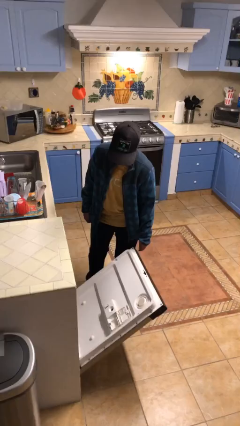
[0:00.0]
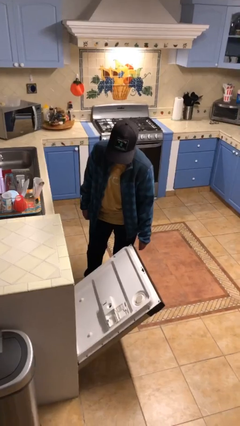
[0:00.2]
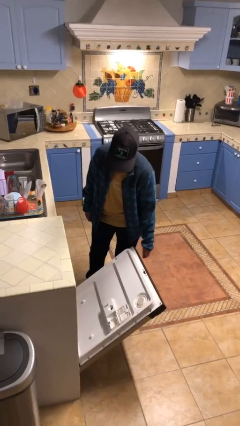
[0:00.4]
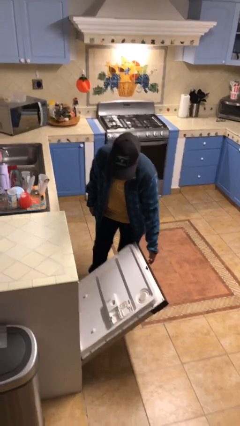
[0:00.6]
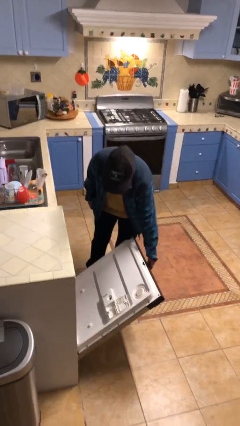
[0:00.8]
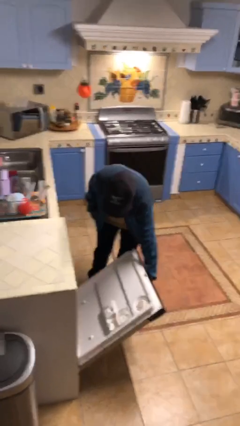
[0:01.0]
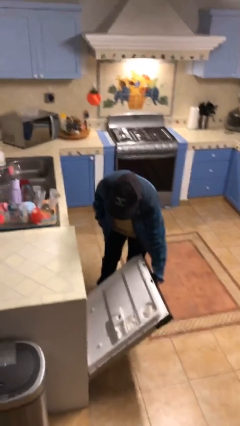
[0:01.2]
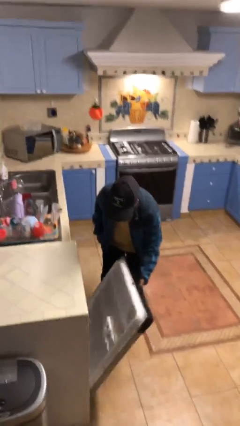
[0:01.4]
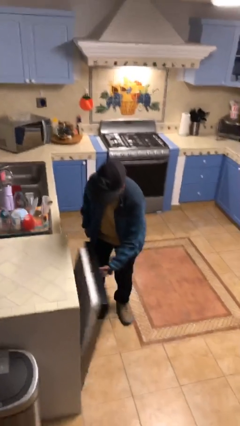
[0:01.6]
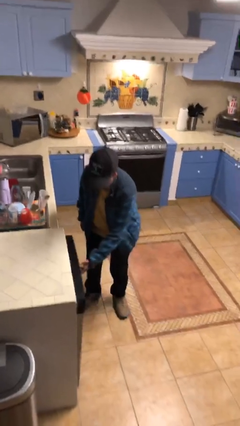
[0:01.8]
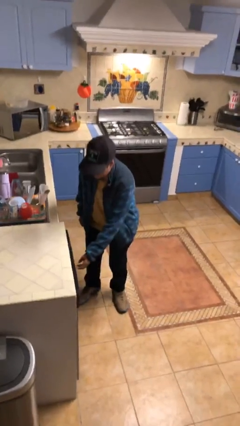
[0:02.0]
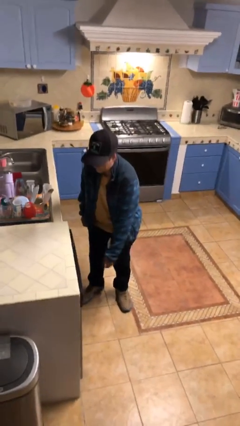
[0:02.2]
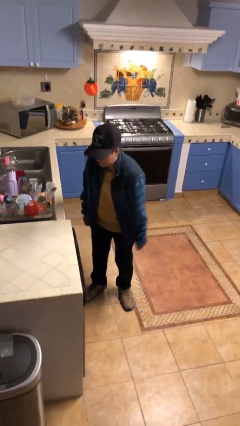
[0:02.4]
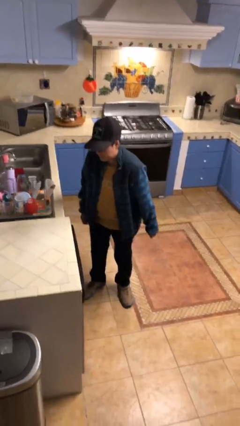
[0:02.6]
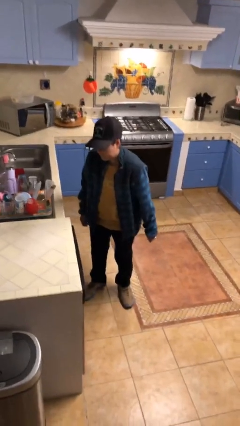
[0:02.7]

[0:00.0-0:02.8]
person closes dishwasher

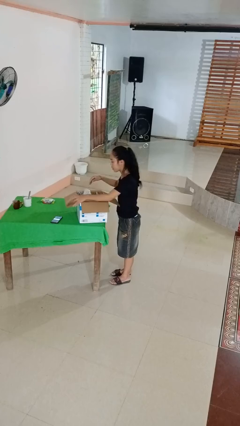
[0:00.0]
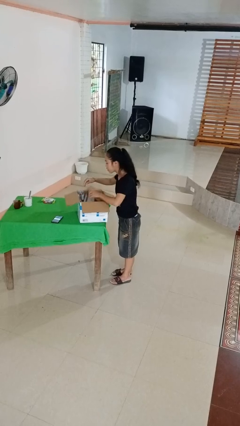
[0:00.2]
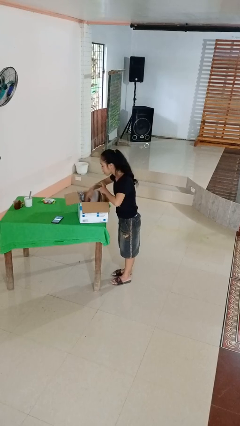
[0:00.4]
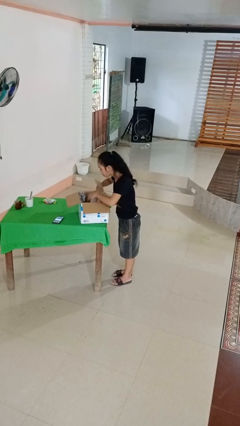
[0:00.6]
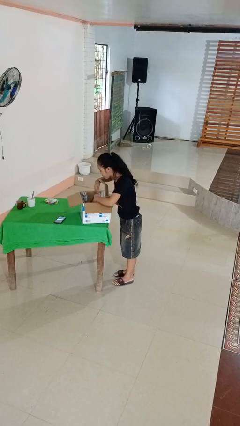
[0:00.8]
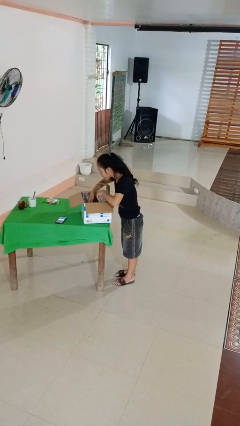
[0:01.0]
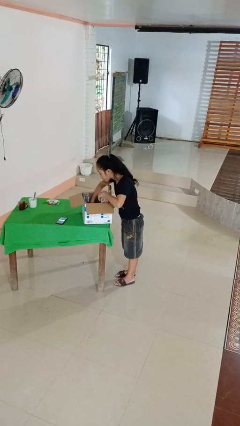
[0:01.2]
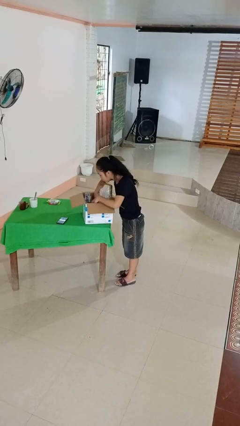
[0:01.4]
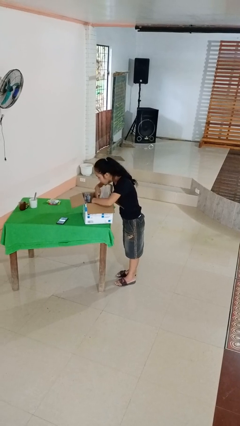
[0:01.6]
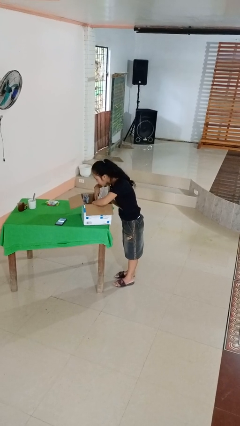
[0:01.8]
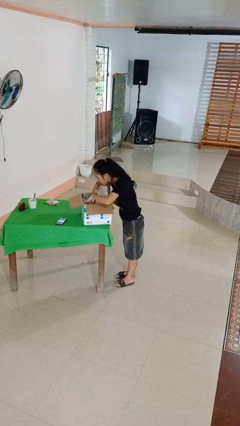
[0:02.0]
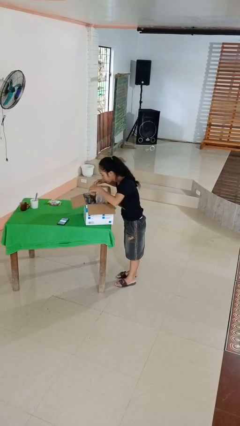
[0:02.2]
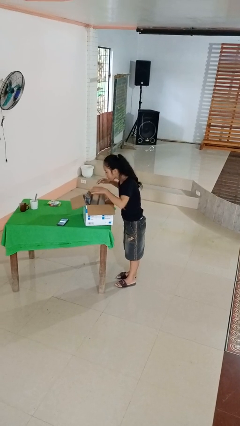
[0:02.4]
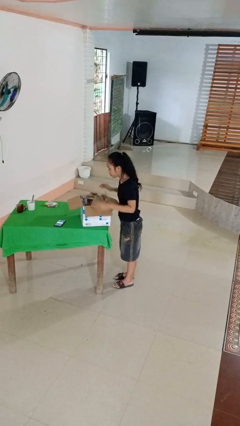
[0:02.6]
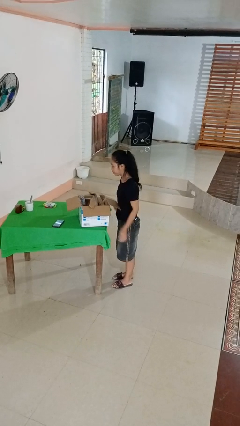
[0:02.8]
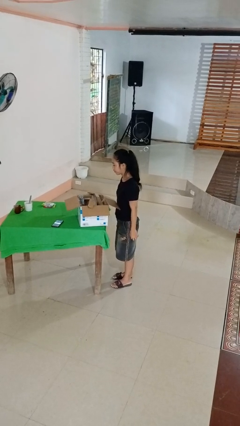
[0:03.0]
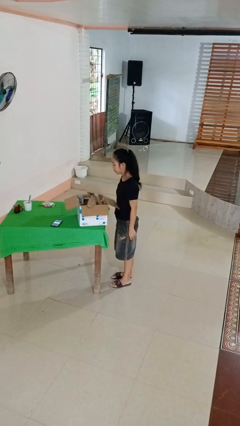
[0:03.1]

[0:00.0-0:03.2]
person searches in box

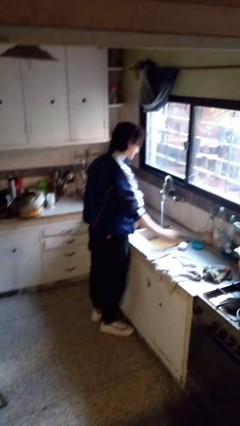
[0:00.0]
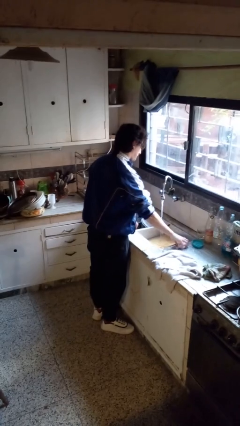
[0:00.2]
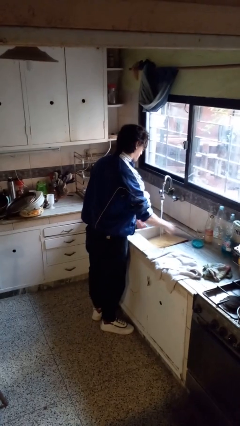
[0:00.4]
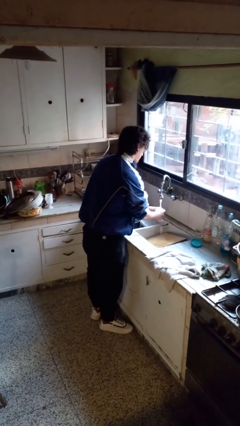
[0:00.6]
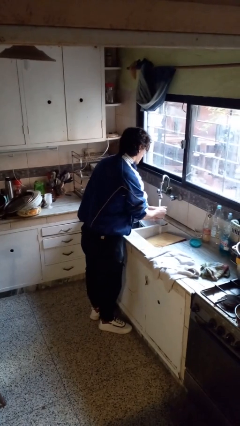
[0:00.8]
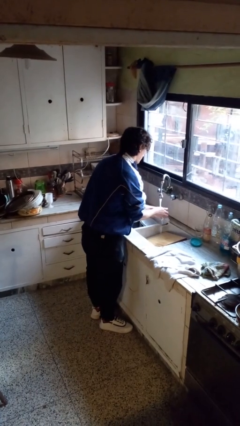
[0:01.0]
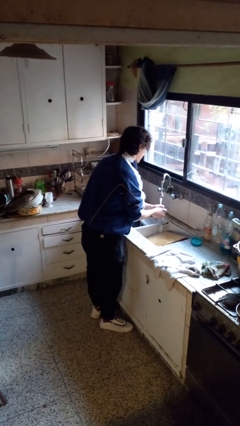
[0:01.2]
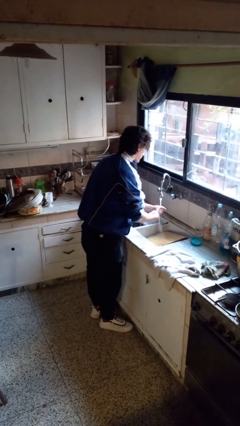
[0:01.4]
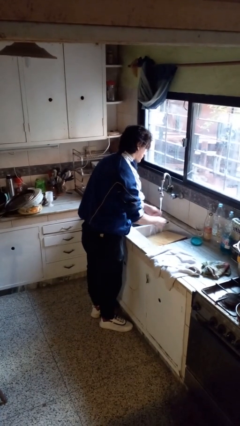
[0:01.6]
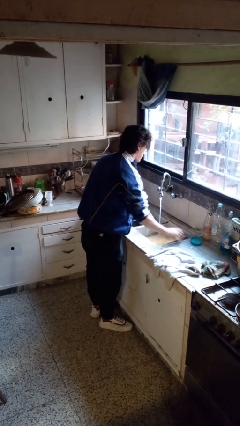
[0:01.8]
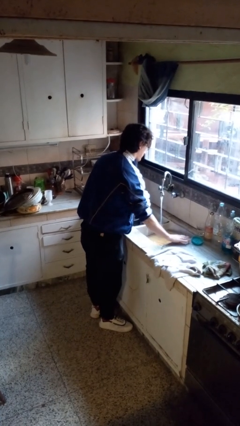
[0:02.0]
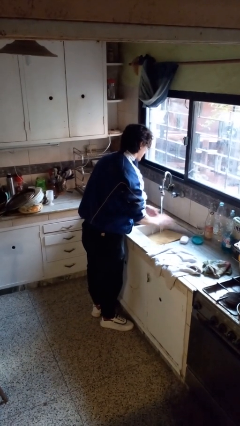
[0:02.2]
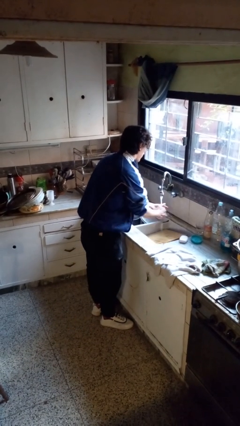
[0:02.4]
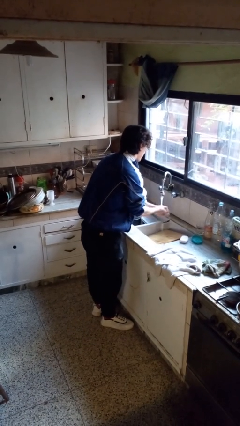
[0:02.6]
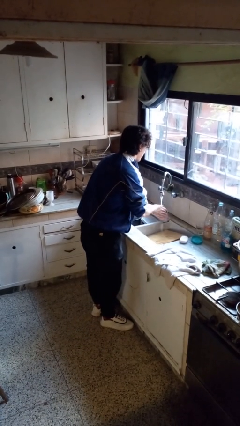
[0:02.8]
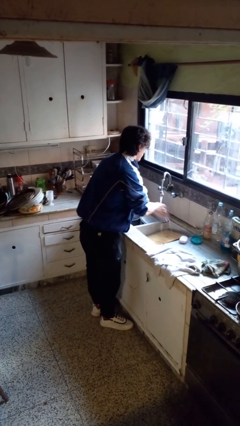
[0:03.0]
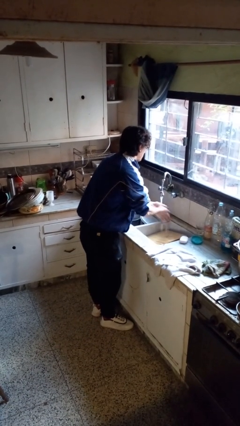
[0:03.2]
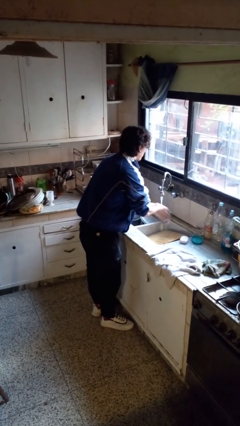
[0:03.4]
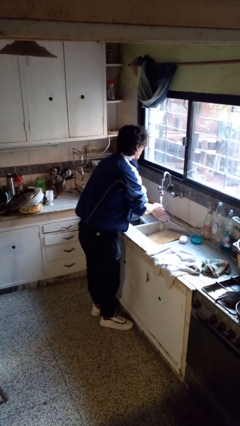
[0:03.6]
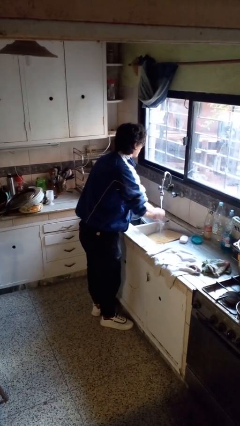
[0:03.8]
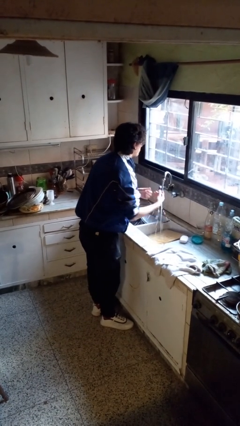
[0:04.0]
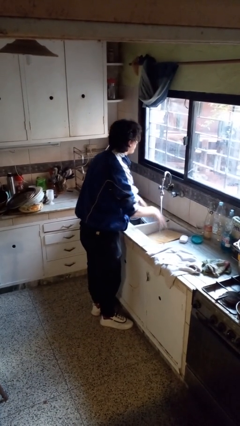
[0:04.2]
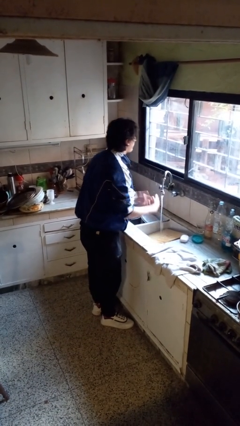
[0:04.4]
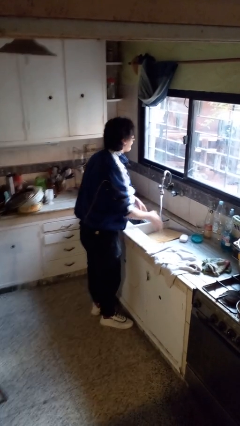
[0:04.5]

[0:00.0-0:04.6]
person washes hands

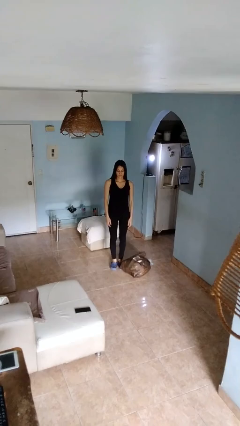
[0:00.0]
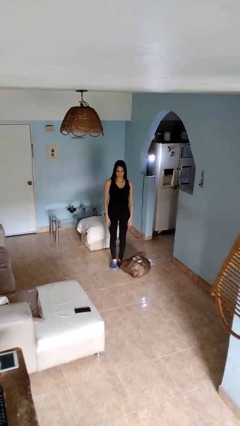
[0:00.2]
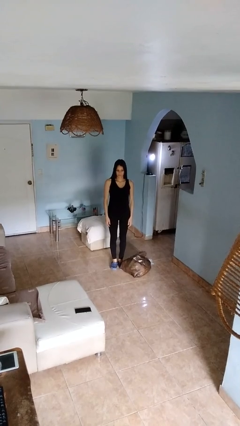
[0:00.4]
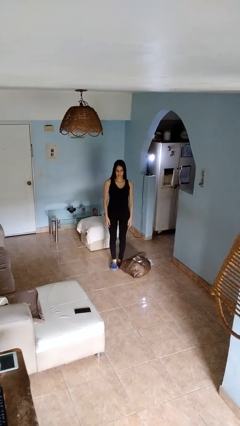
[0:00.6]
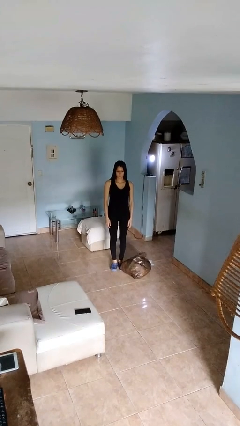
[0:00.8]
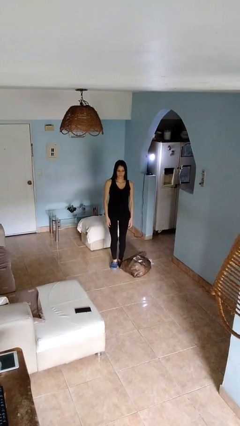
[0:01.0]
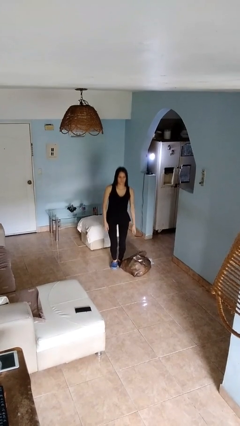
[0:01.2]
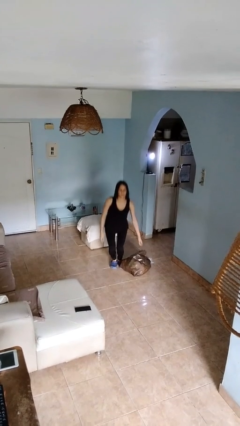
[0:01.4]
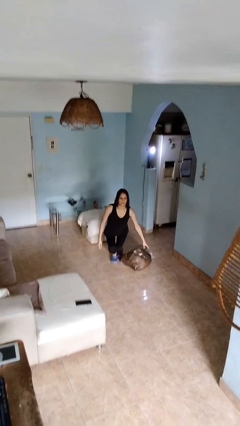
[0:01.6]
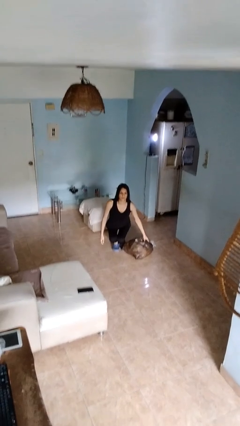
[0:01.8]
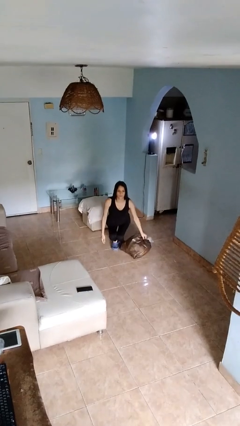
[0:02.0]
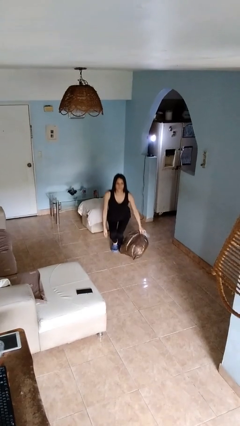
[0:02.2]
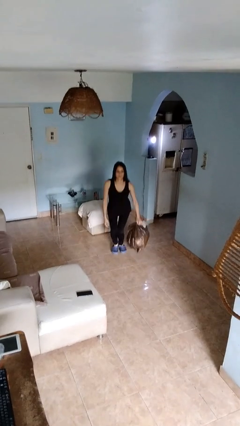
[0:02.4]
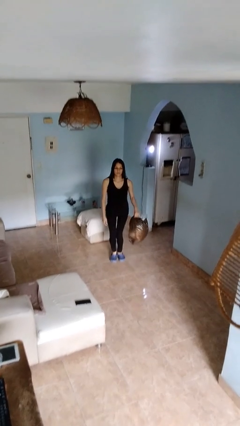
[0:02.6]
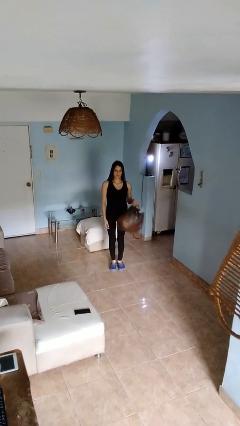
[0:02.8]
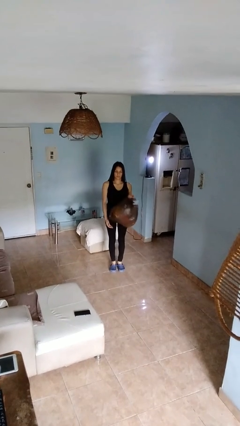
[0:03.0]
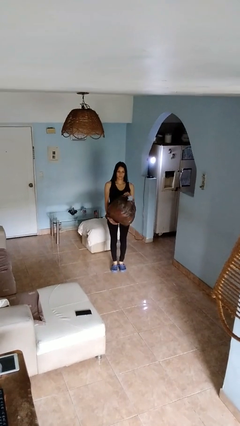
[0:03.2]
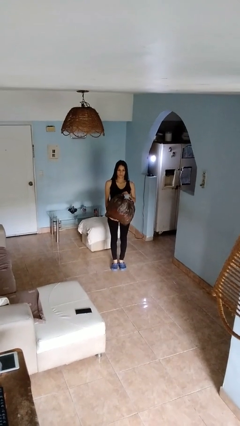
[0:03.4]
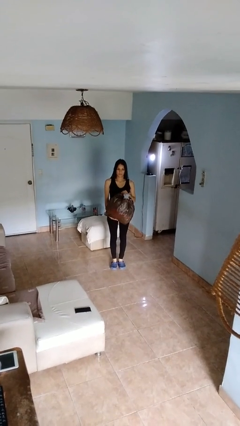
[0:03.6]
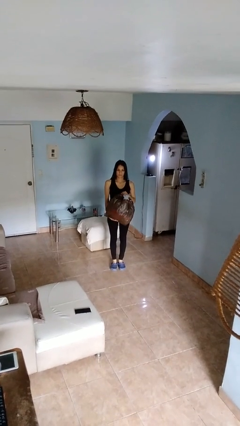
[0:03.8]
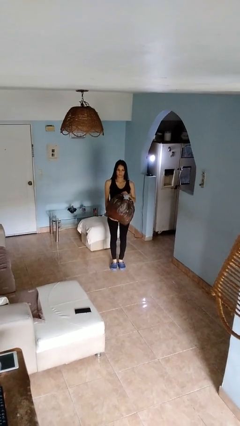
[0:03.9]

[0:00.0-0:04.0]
person picks up object from floor

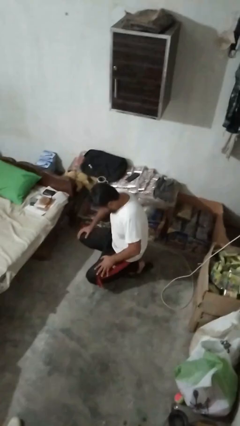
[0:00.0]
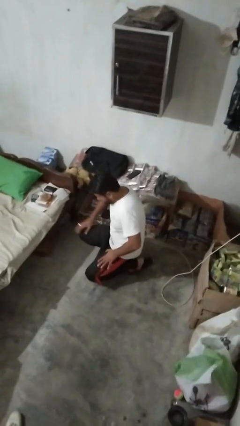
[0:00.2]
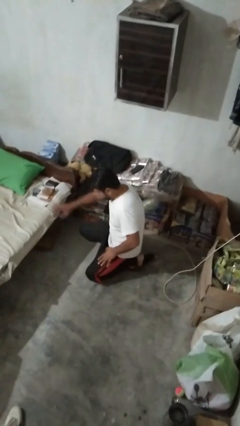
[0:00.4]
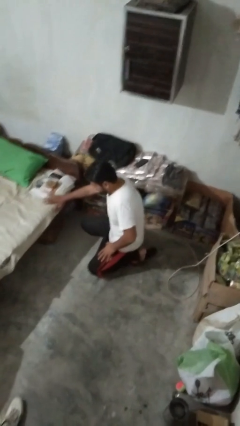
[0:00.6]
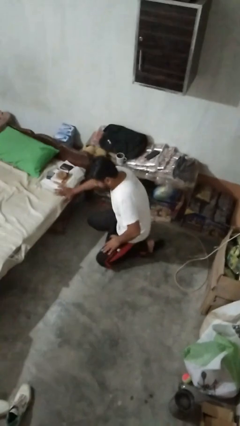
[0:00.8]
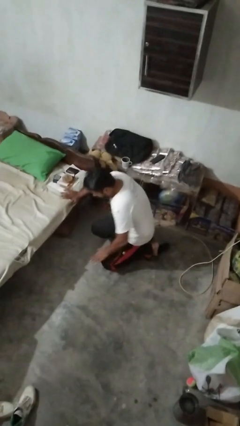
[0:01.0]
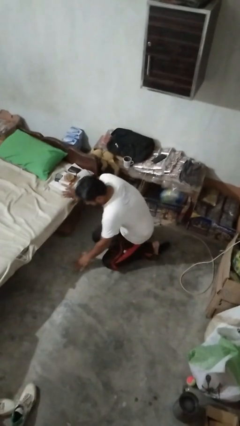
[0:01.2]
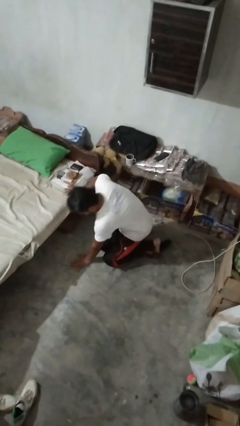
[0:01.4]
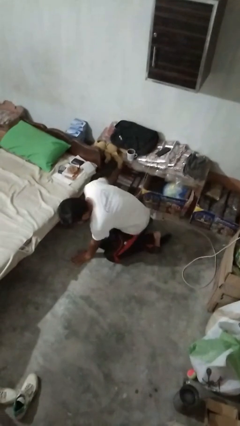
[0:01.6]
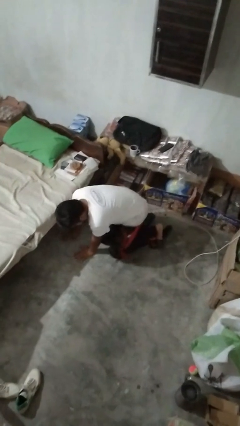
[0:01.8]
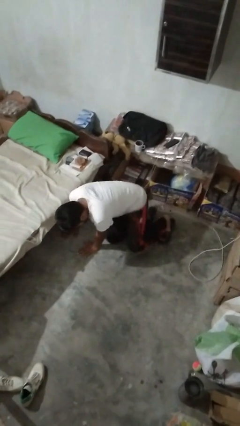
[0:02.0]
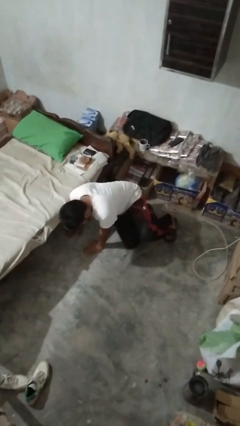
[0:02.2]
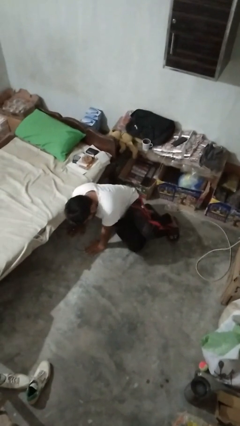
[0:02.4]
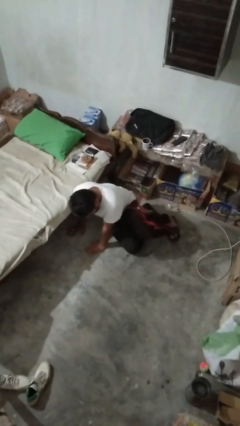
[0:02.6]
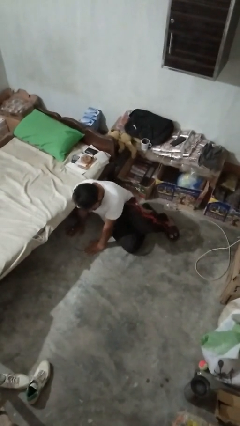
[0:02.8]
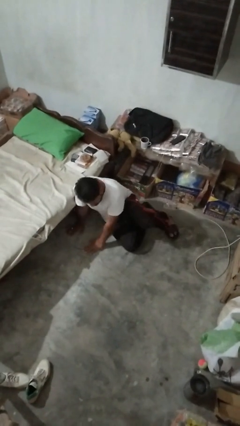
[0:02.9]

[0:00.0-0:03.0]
person lies down on floor
